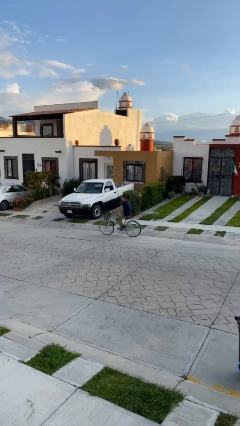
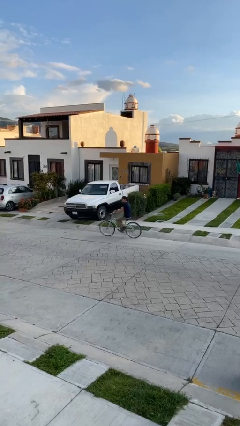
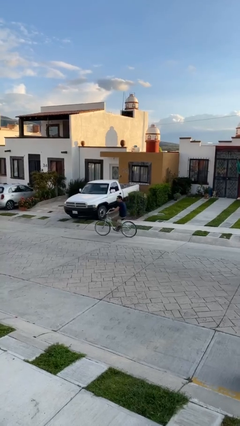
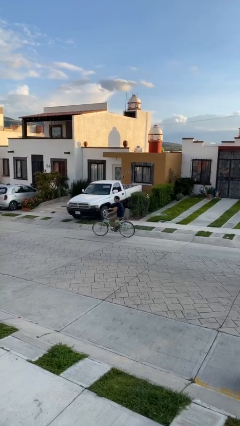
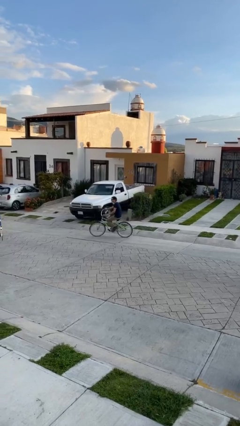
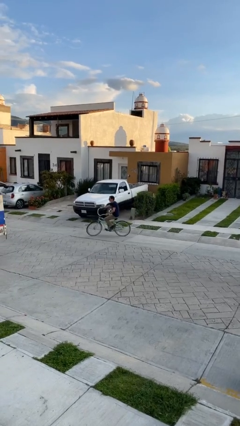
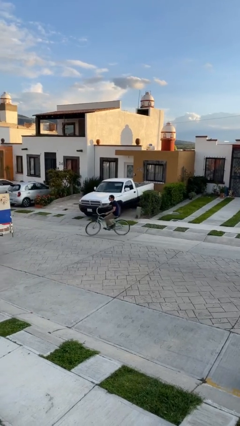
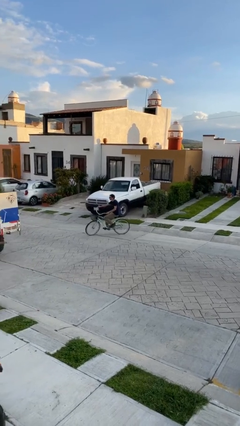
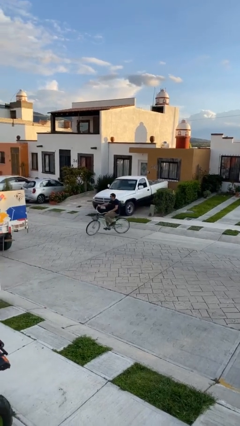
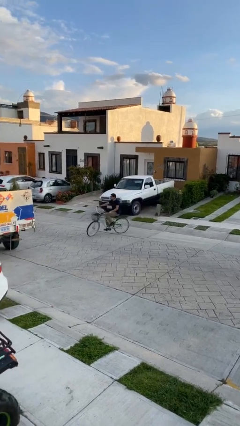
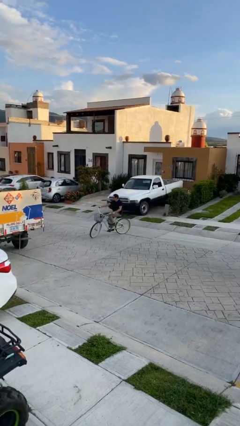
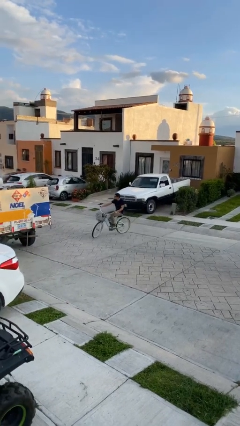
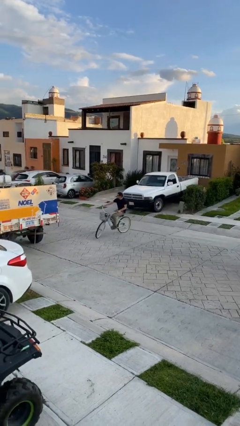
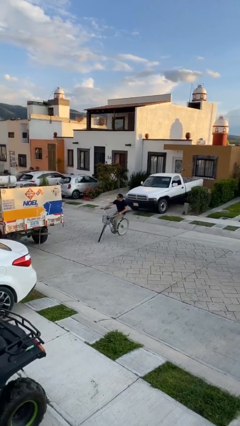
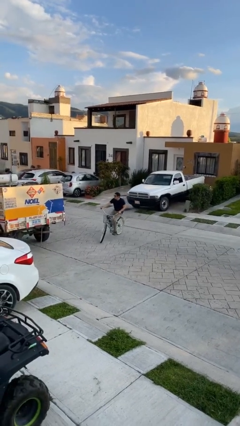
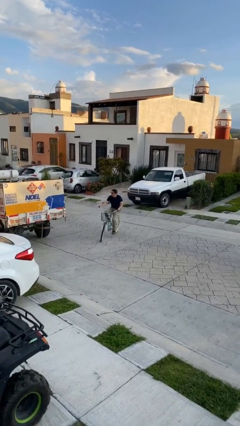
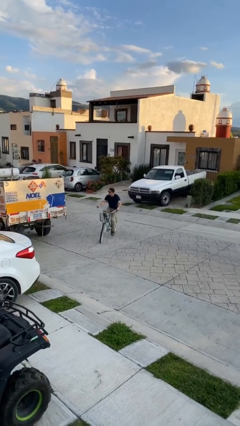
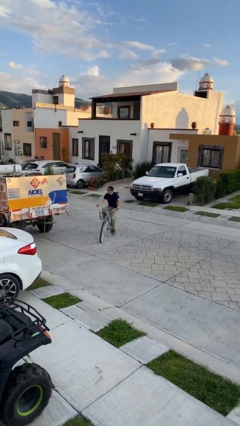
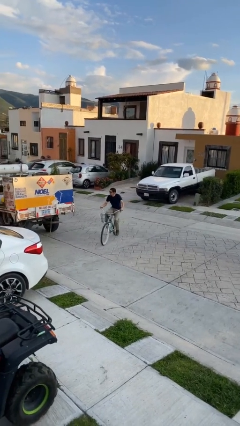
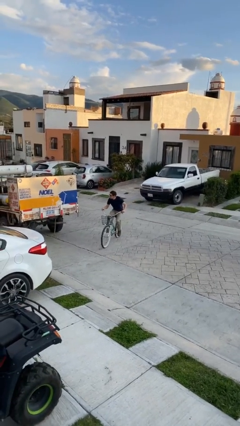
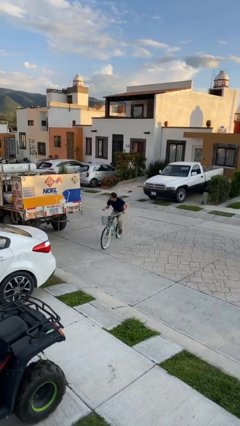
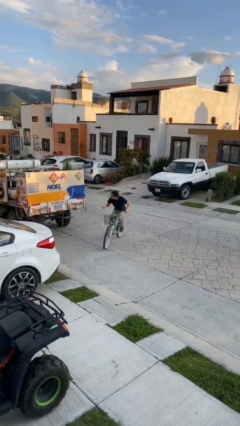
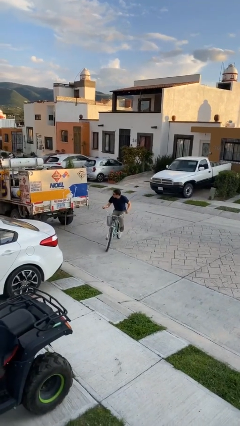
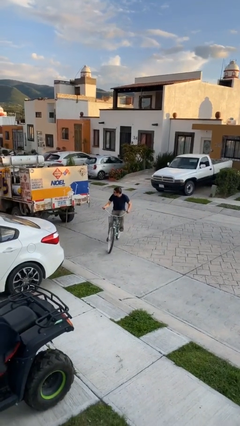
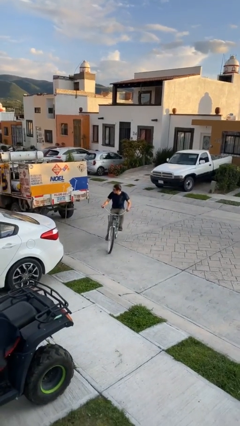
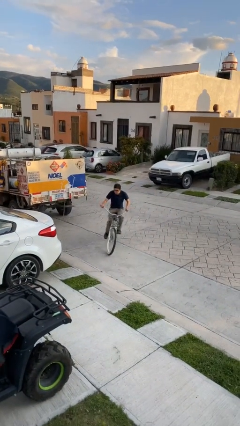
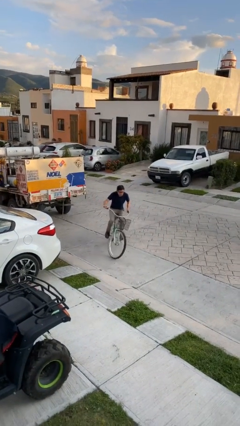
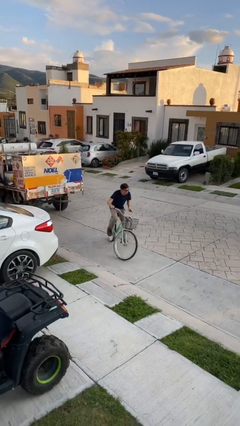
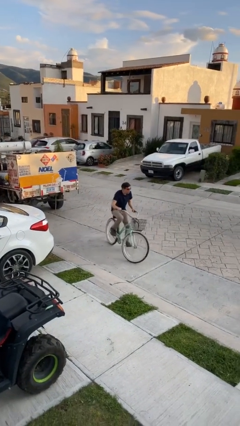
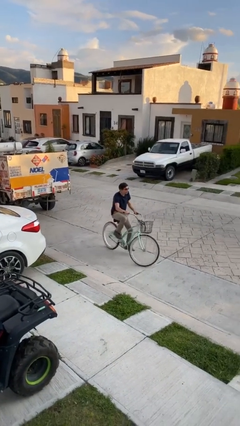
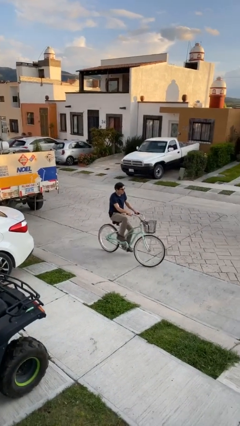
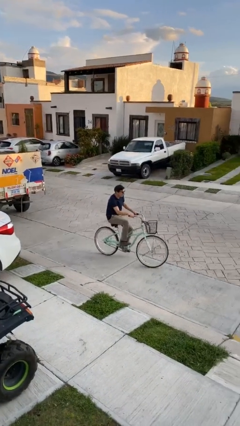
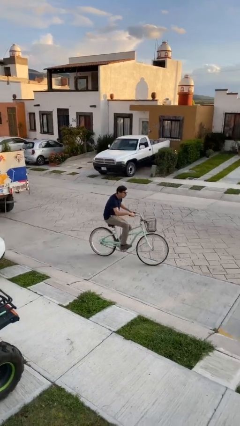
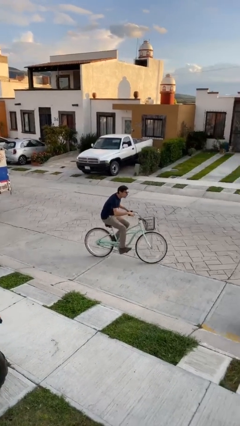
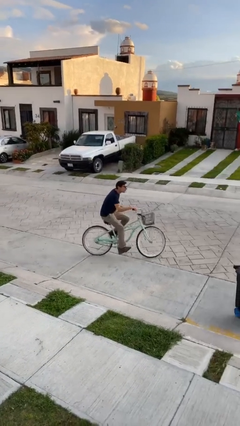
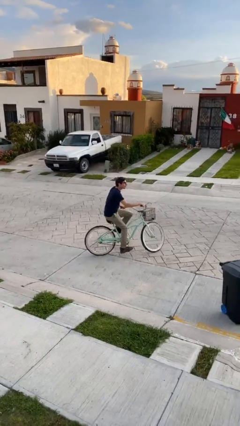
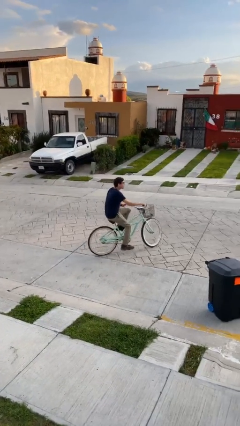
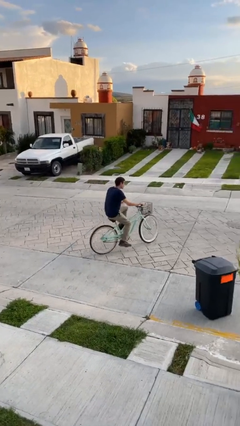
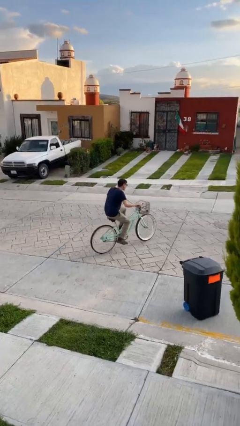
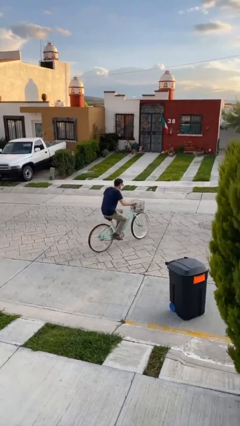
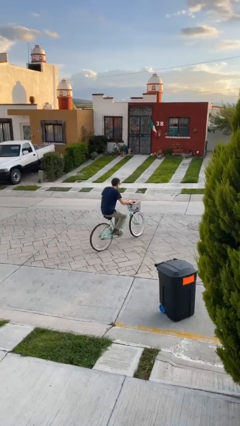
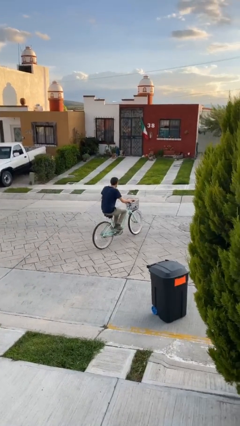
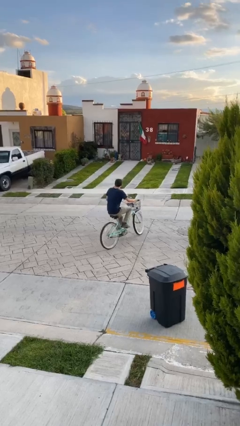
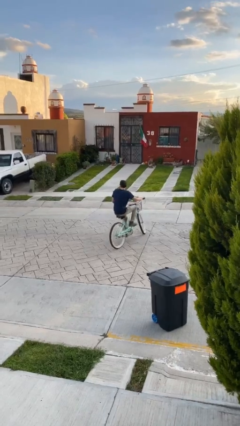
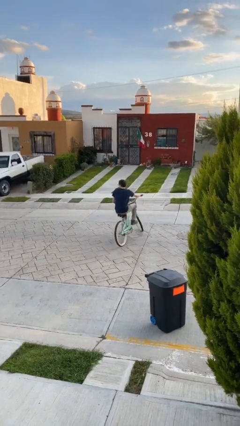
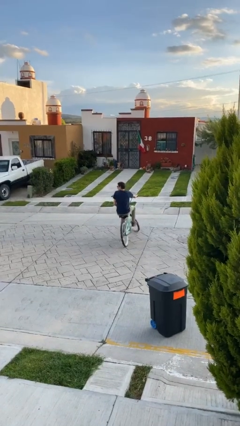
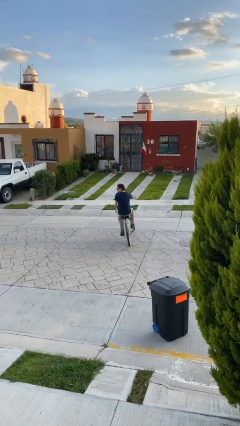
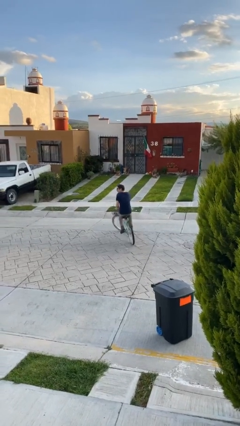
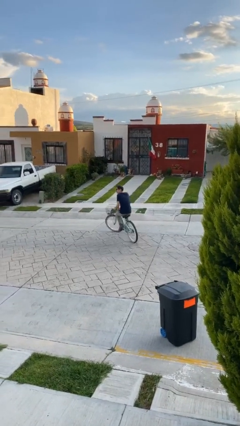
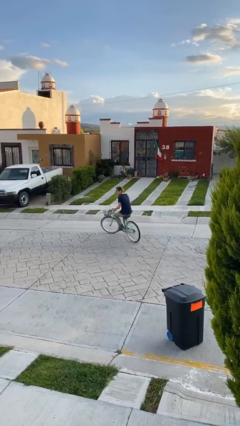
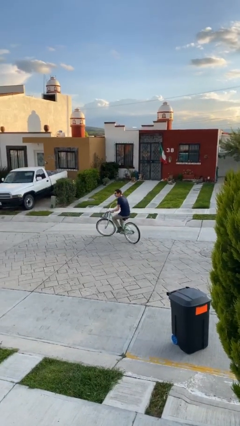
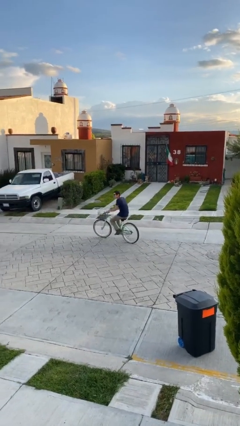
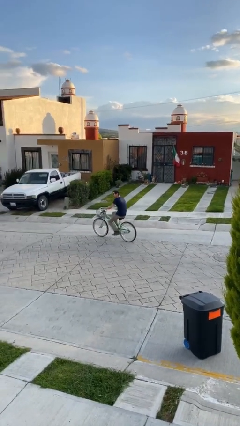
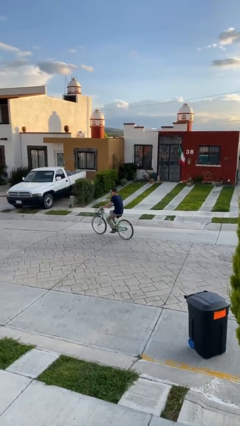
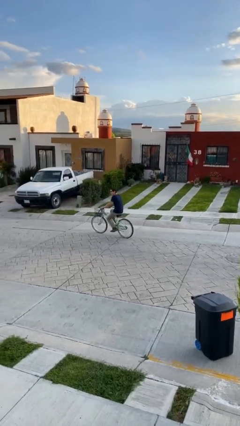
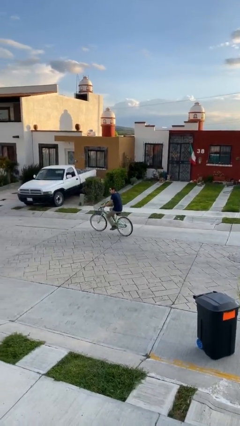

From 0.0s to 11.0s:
person rides bicycle

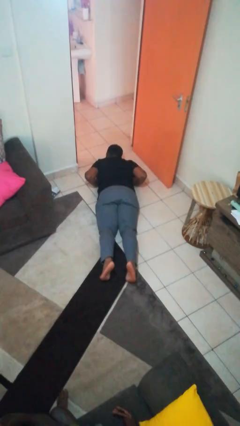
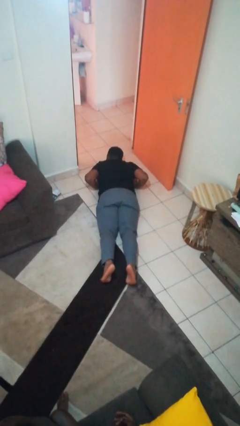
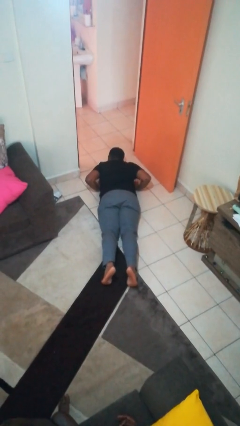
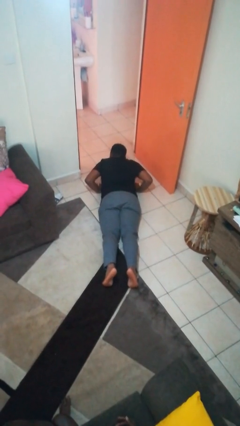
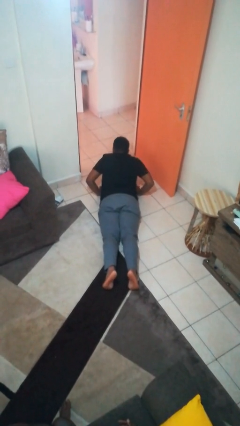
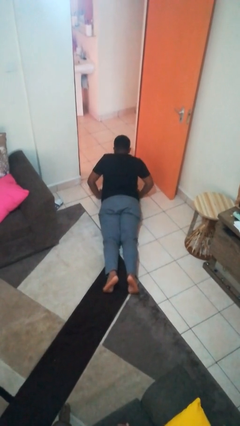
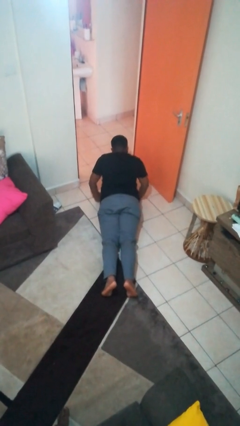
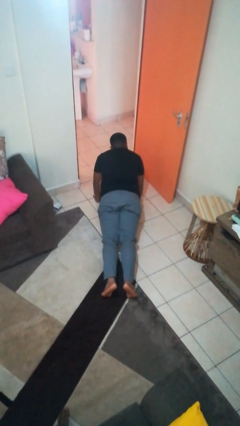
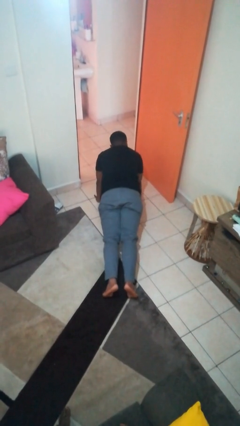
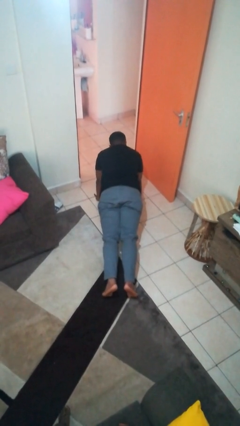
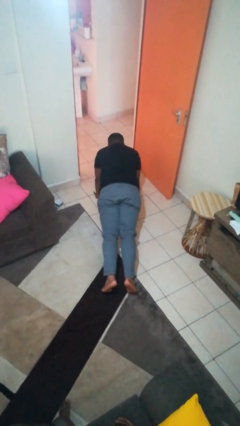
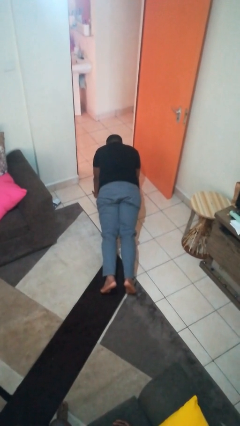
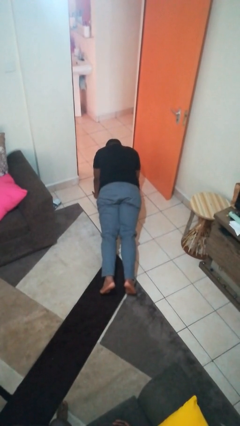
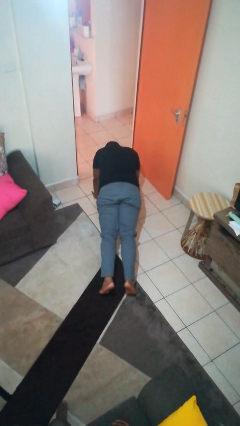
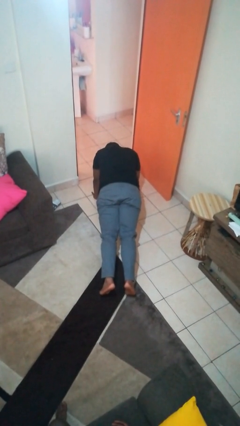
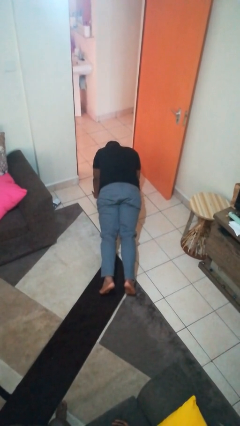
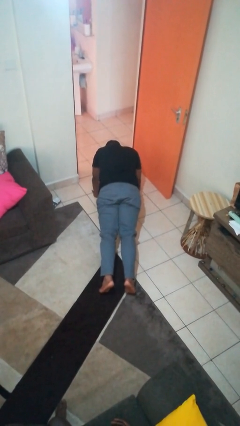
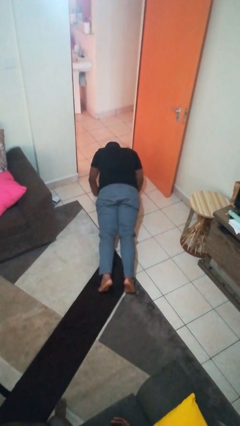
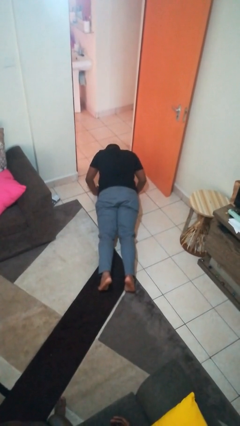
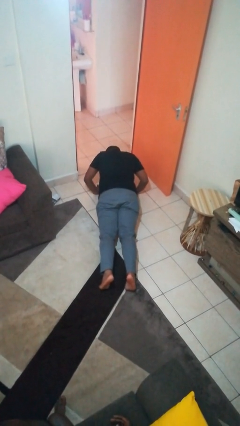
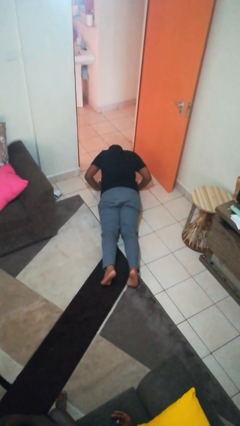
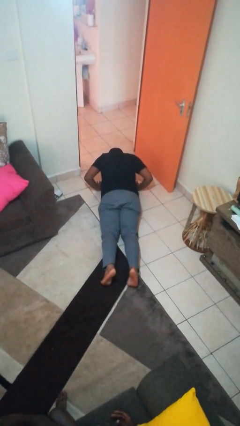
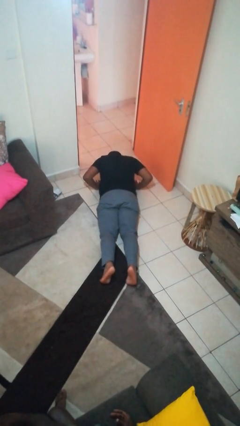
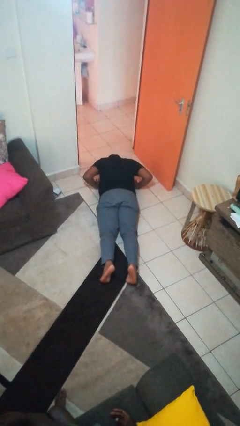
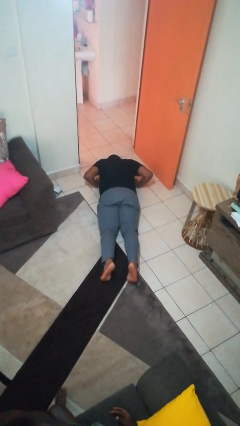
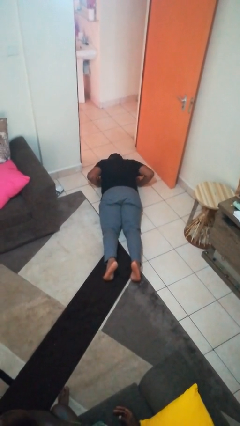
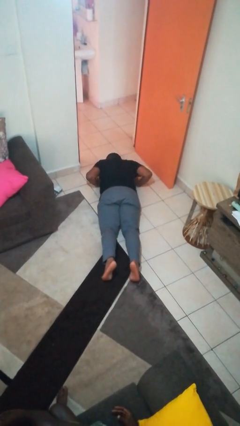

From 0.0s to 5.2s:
person exercises with pushup

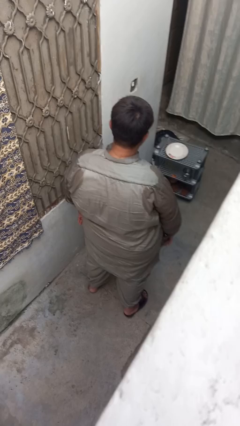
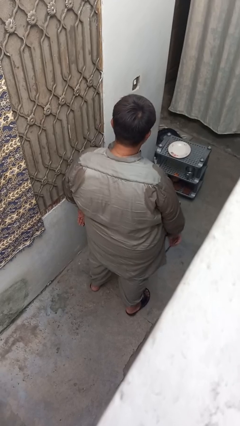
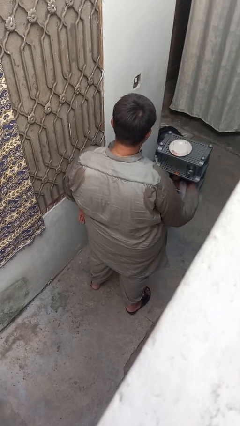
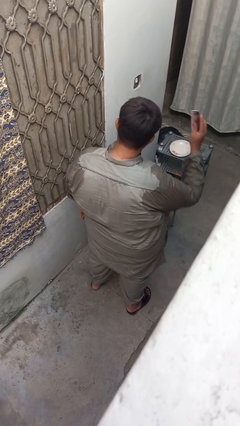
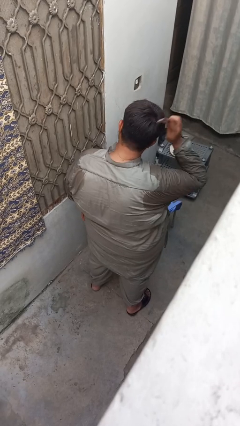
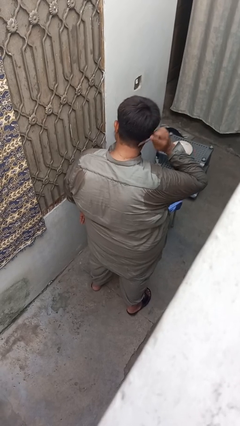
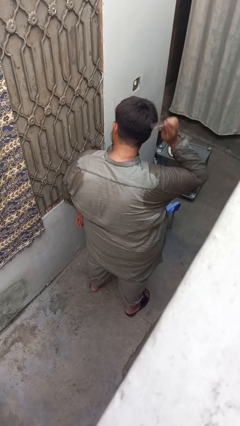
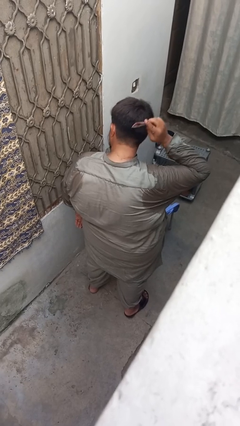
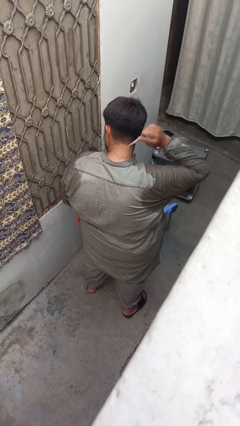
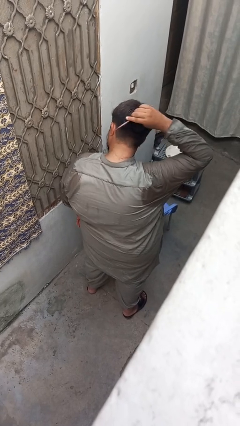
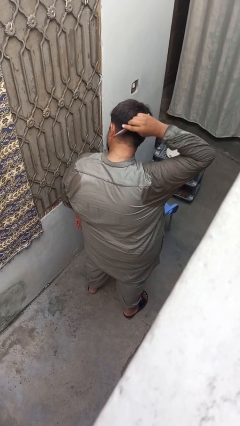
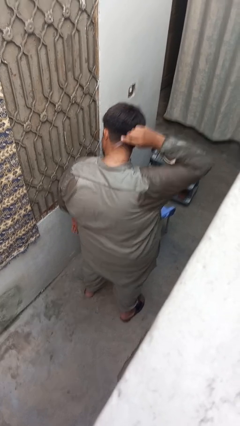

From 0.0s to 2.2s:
person brushes hair
